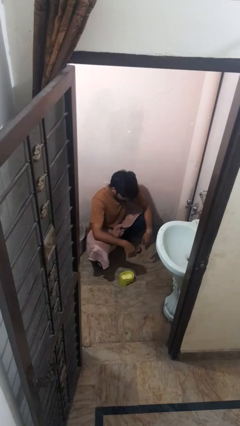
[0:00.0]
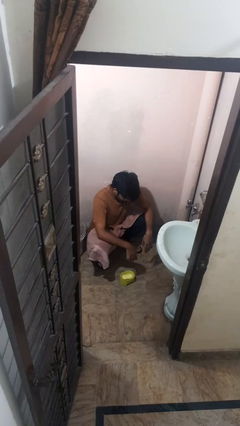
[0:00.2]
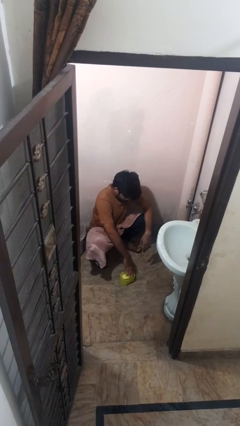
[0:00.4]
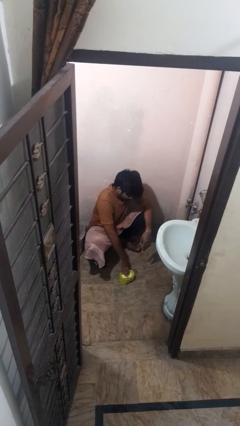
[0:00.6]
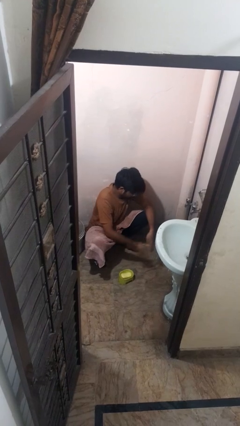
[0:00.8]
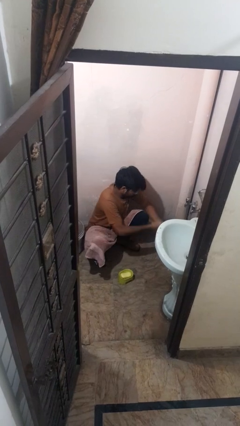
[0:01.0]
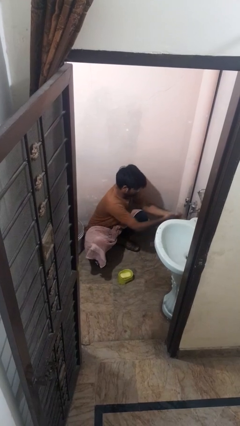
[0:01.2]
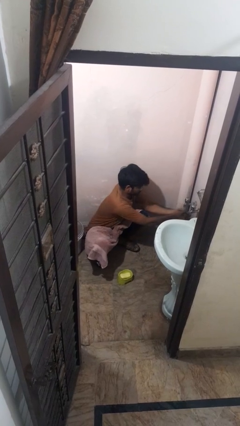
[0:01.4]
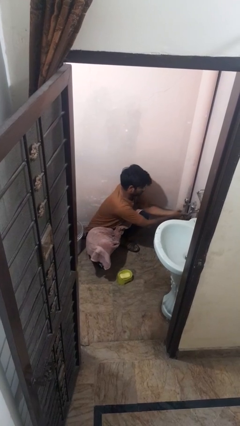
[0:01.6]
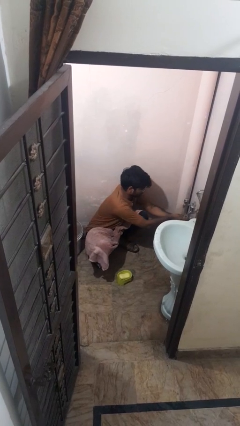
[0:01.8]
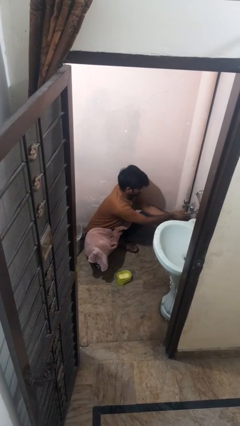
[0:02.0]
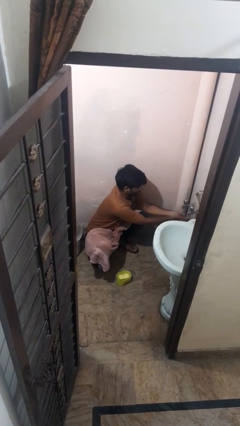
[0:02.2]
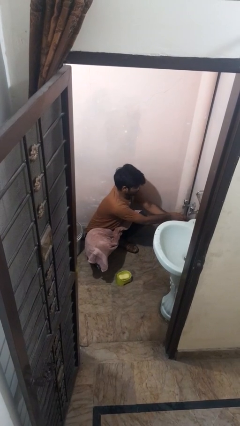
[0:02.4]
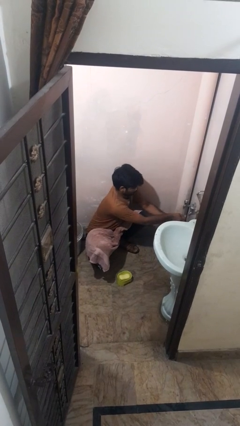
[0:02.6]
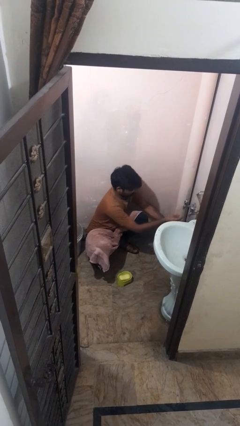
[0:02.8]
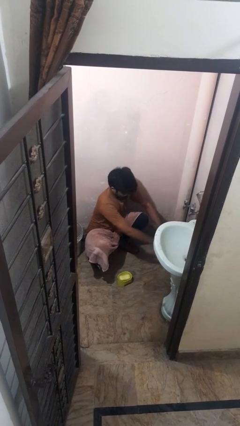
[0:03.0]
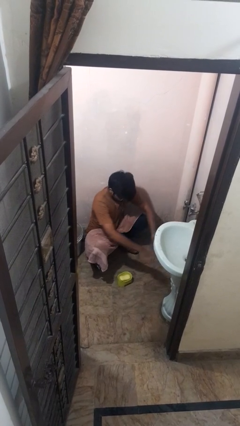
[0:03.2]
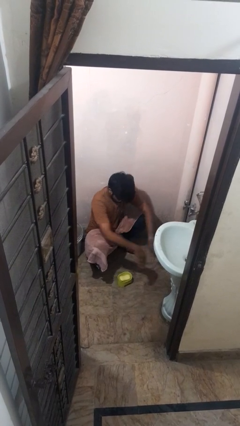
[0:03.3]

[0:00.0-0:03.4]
person washes hands

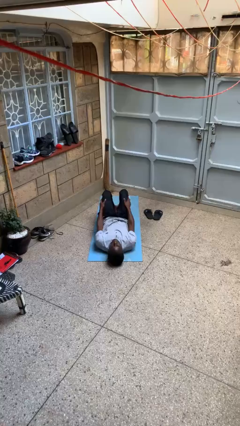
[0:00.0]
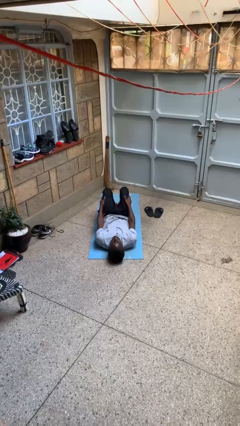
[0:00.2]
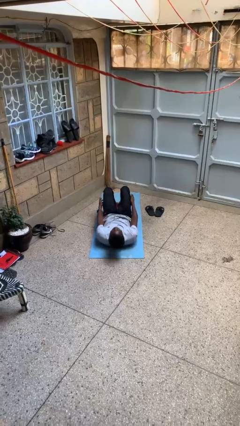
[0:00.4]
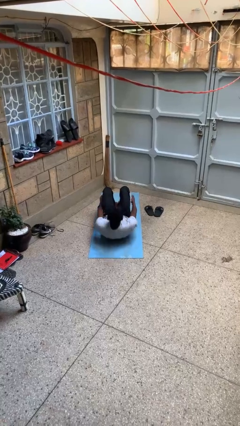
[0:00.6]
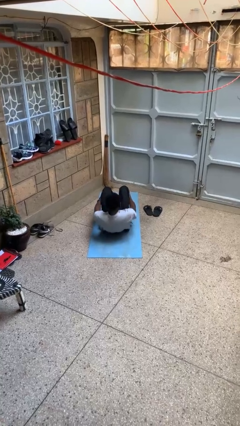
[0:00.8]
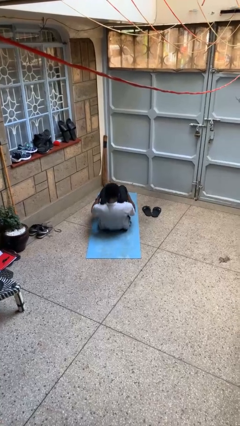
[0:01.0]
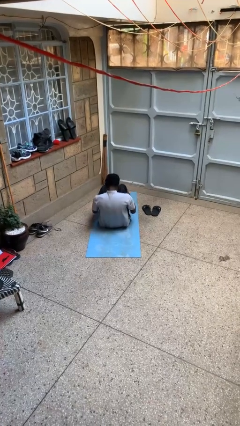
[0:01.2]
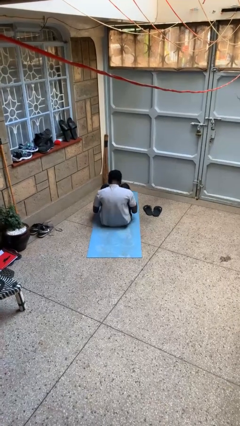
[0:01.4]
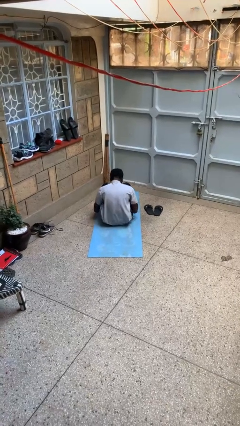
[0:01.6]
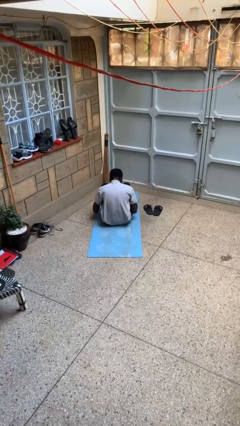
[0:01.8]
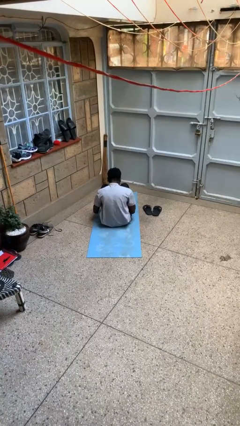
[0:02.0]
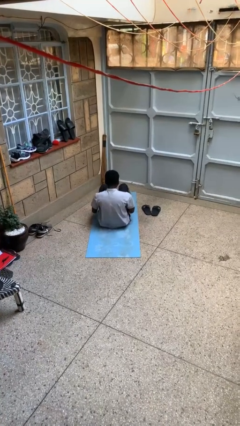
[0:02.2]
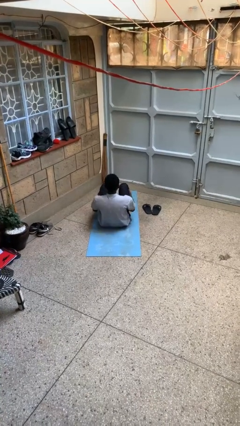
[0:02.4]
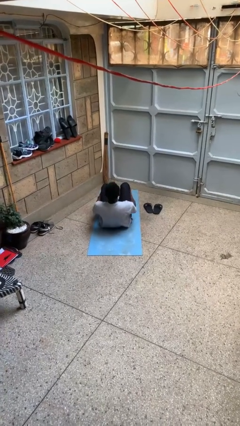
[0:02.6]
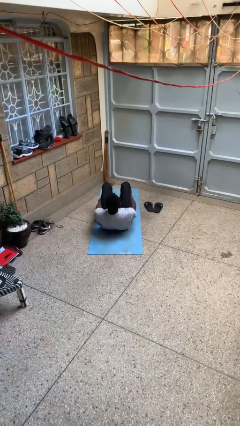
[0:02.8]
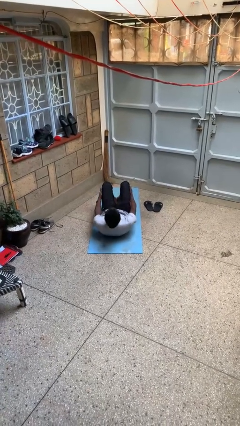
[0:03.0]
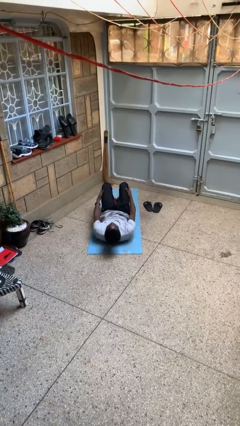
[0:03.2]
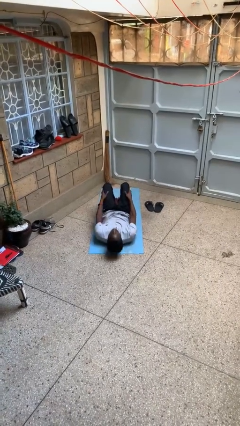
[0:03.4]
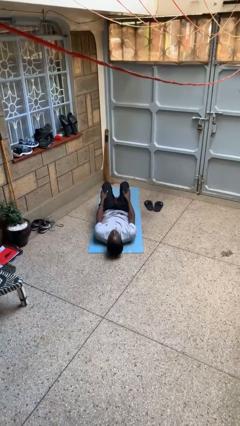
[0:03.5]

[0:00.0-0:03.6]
person exercises with situp

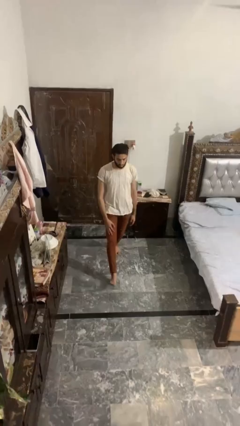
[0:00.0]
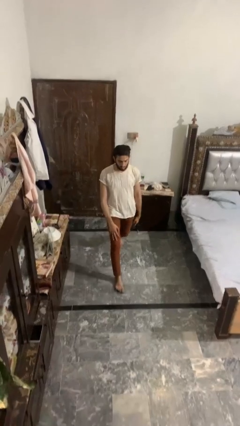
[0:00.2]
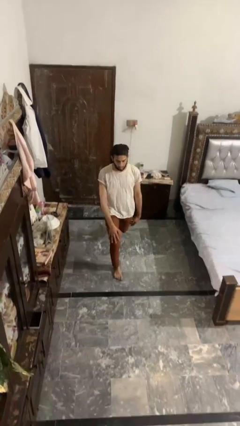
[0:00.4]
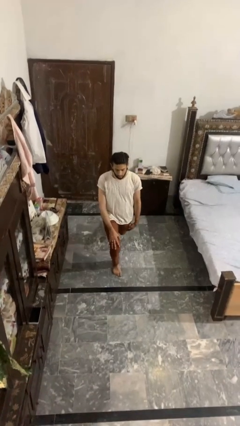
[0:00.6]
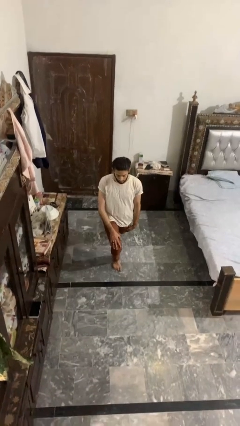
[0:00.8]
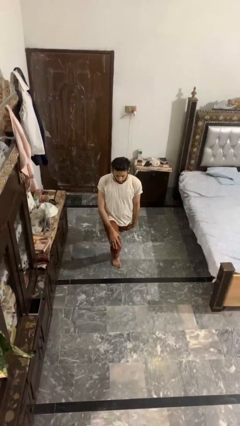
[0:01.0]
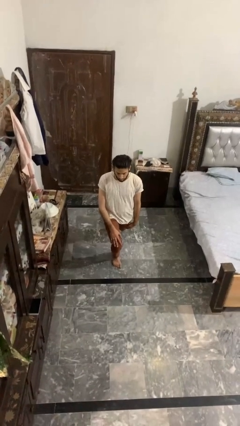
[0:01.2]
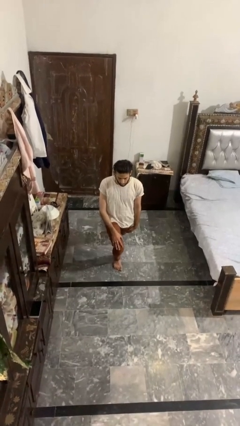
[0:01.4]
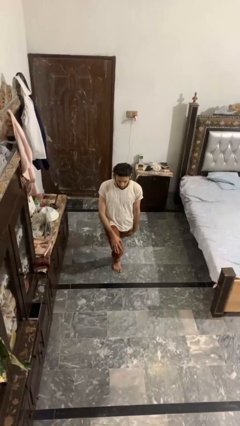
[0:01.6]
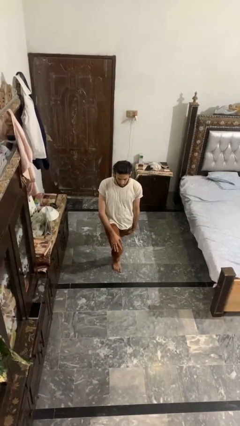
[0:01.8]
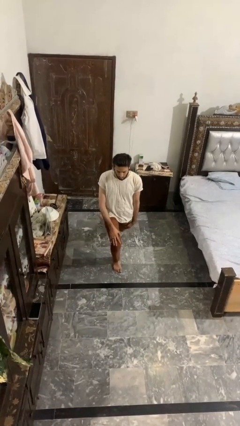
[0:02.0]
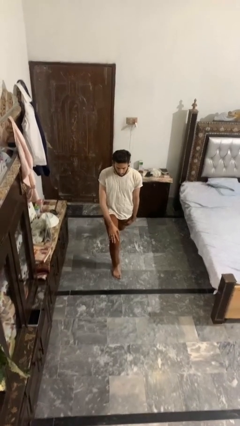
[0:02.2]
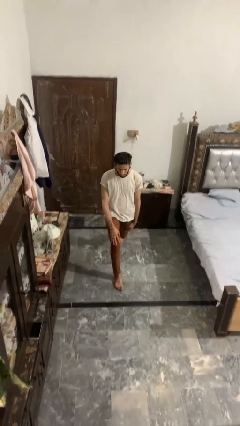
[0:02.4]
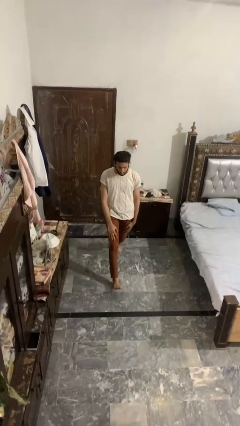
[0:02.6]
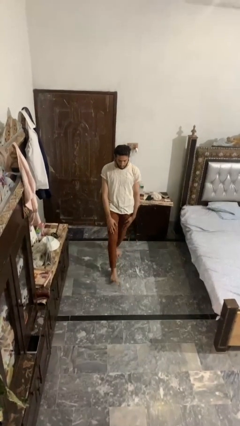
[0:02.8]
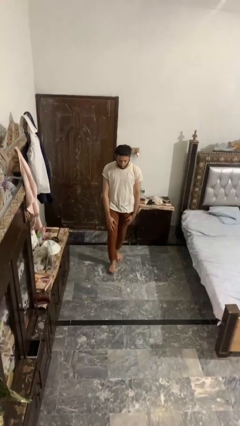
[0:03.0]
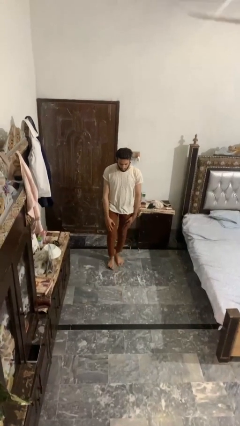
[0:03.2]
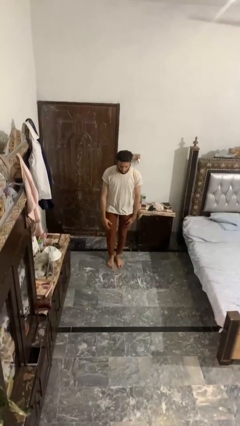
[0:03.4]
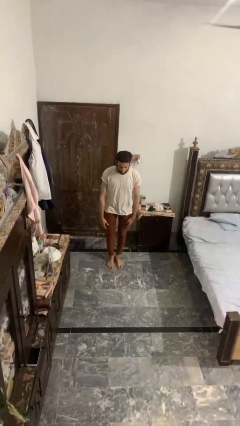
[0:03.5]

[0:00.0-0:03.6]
person exercises with lunges

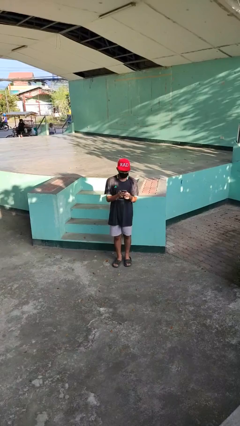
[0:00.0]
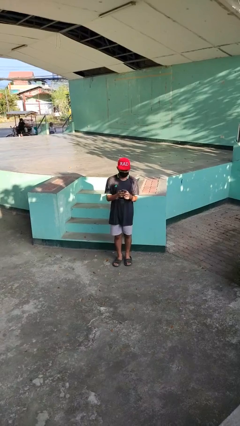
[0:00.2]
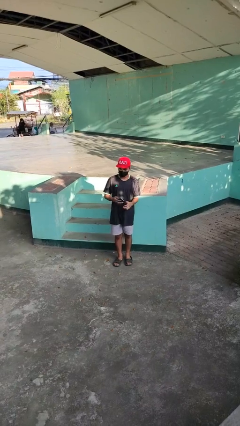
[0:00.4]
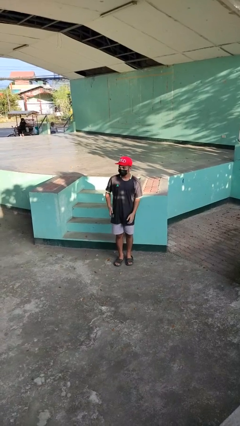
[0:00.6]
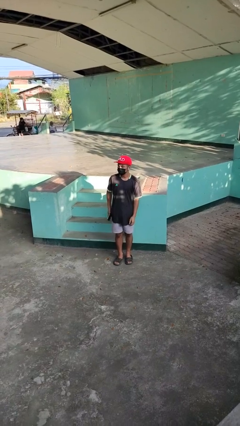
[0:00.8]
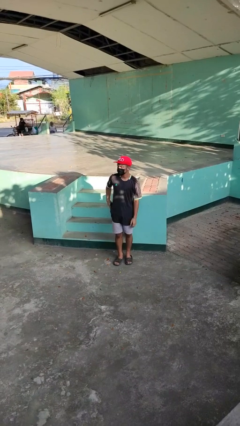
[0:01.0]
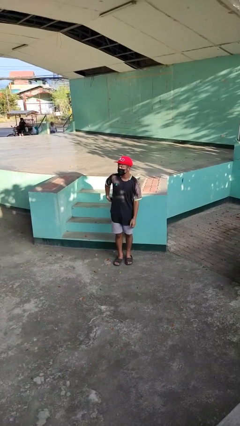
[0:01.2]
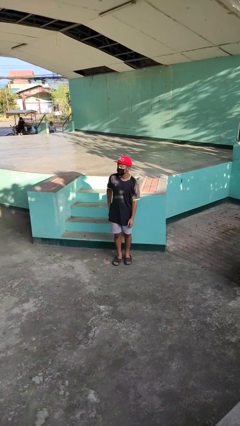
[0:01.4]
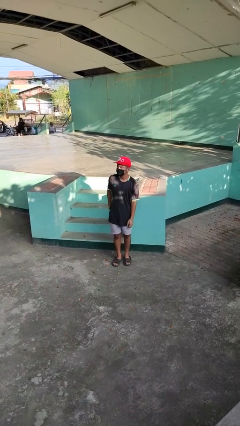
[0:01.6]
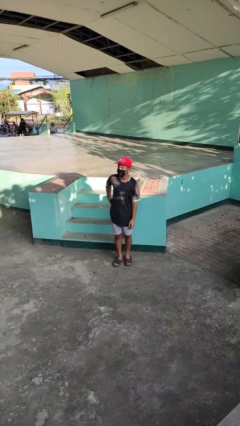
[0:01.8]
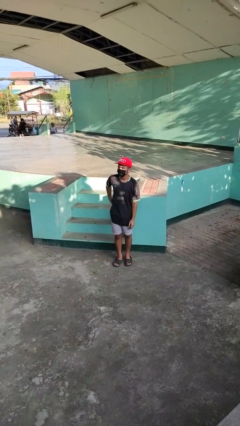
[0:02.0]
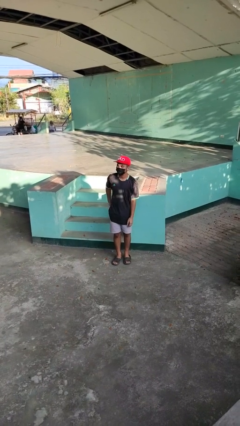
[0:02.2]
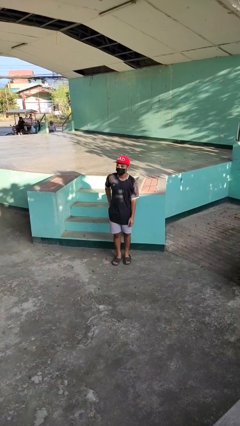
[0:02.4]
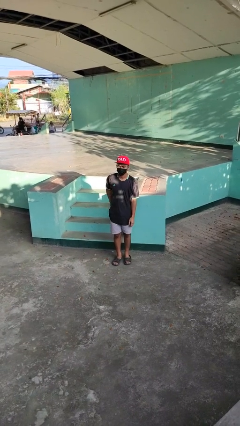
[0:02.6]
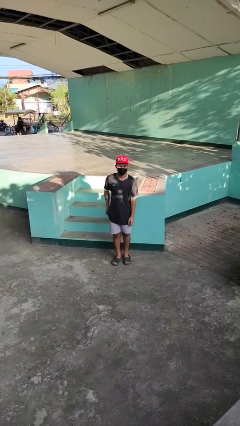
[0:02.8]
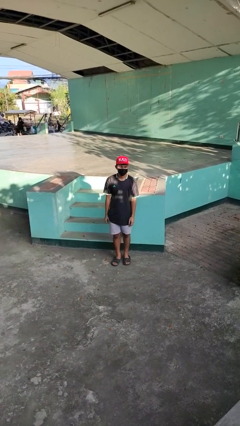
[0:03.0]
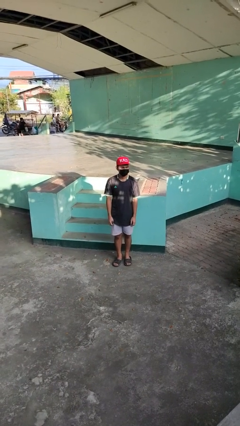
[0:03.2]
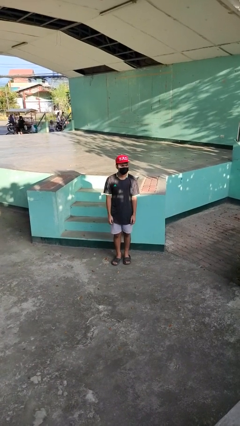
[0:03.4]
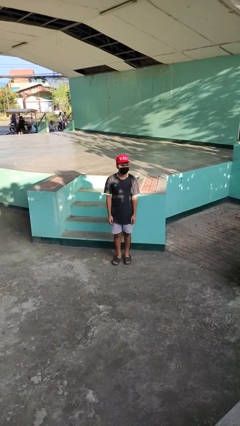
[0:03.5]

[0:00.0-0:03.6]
person puts phone into pocket

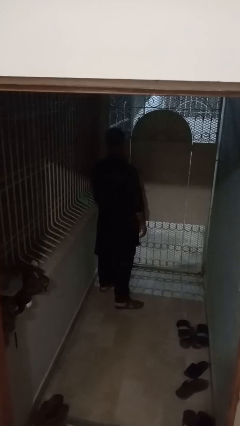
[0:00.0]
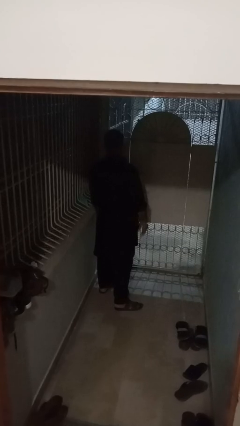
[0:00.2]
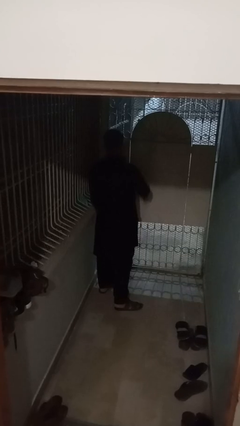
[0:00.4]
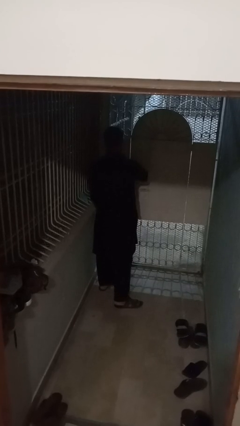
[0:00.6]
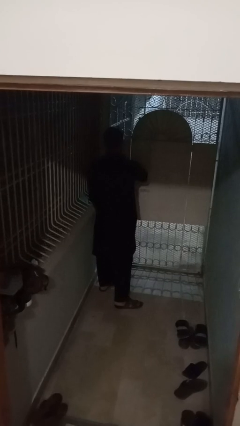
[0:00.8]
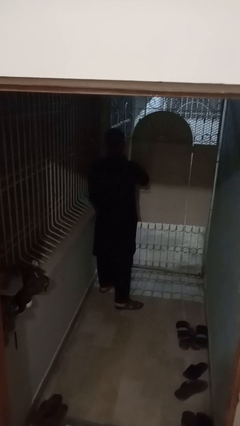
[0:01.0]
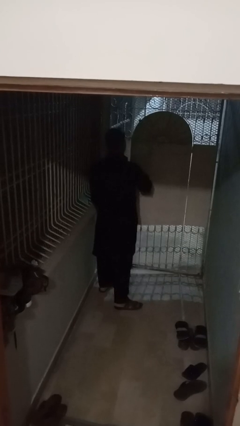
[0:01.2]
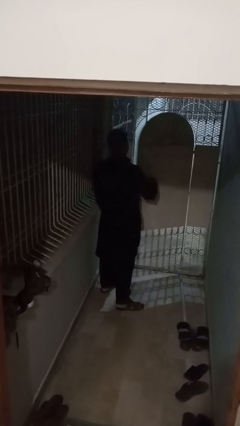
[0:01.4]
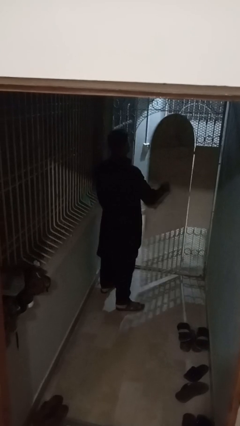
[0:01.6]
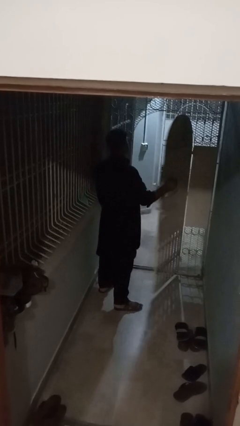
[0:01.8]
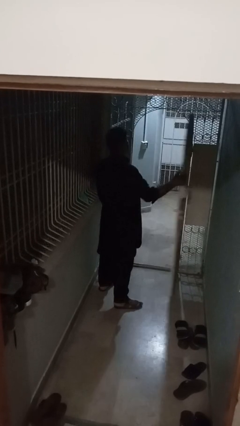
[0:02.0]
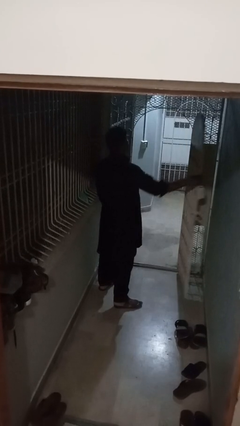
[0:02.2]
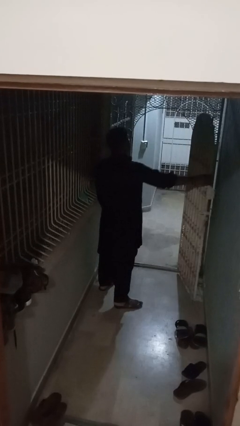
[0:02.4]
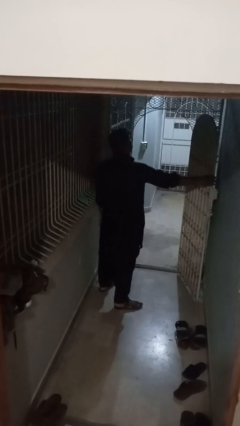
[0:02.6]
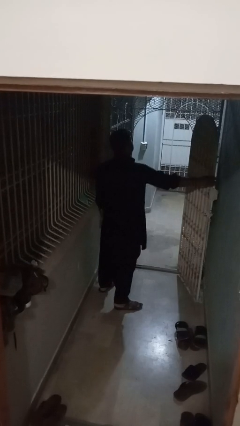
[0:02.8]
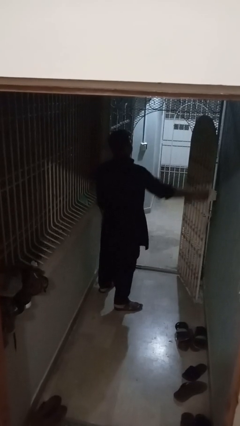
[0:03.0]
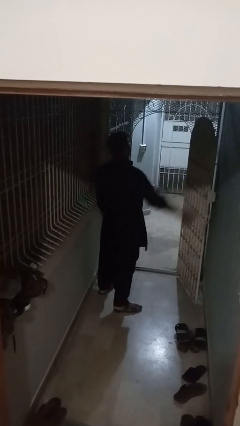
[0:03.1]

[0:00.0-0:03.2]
person opens gate

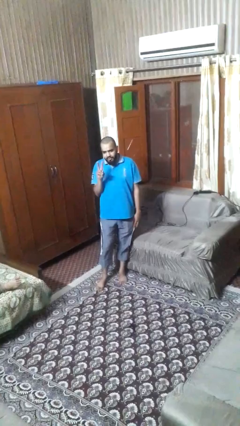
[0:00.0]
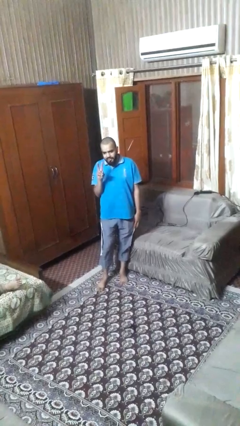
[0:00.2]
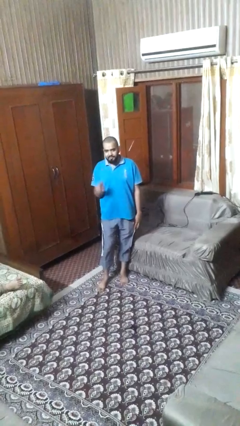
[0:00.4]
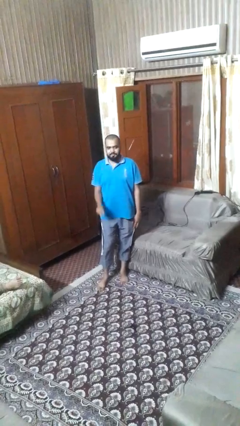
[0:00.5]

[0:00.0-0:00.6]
person gestures peace
